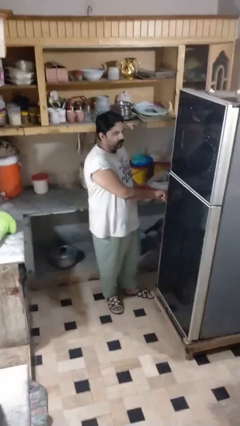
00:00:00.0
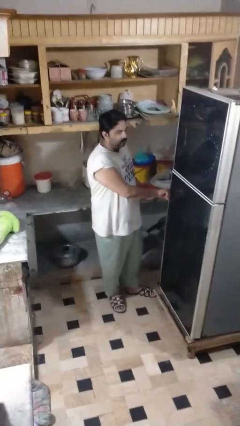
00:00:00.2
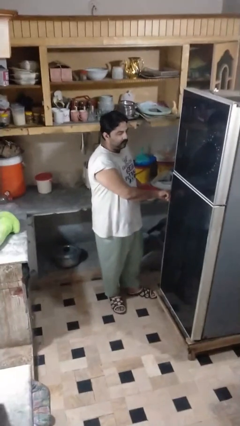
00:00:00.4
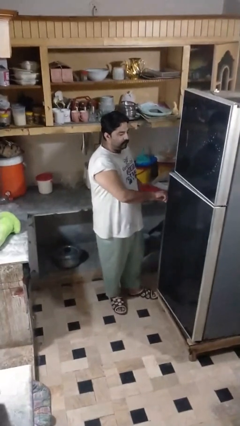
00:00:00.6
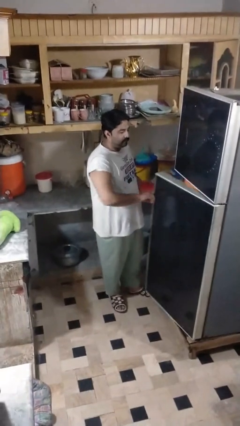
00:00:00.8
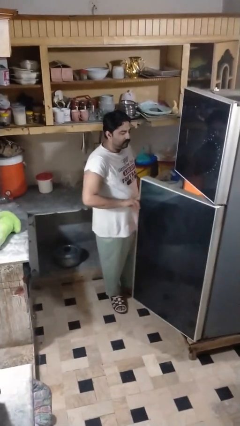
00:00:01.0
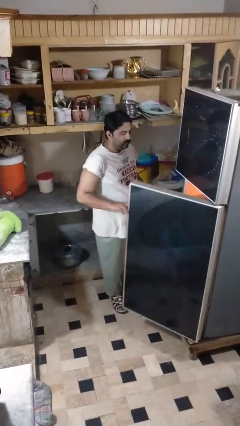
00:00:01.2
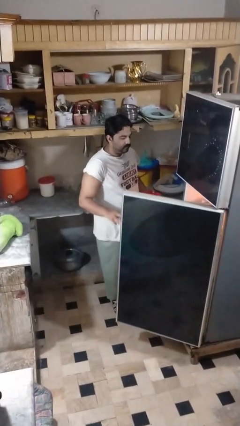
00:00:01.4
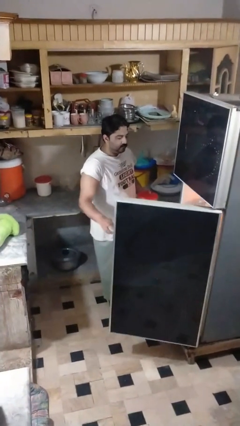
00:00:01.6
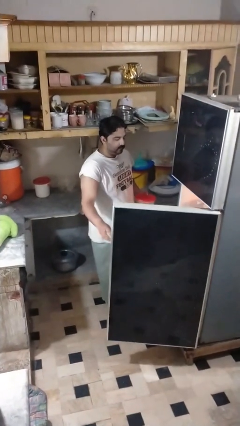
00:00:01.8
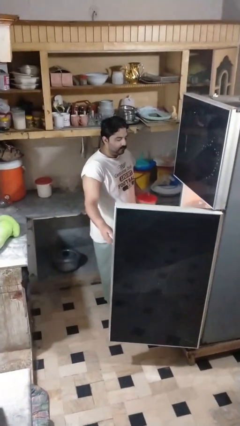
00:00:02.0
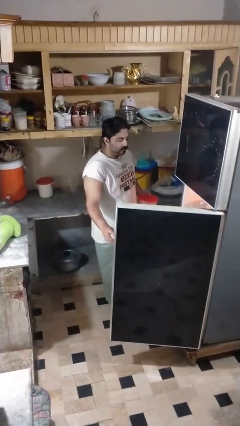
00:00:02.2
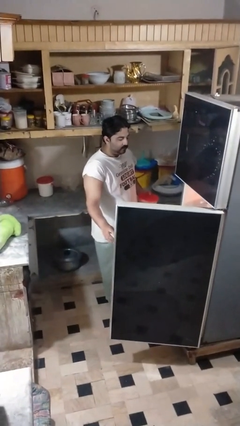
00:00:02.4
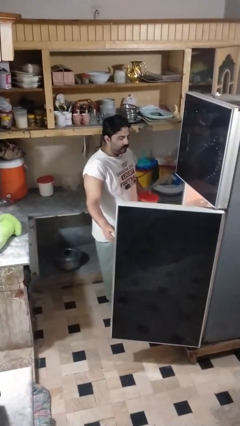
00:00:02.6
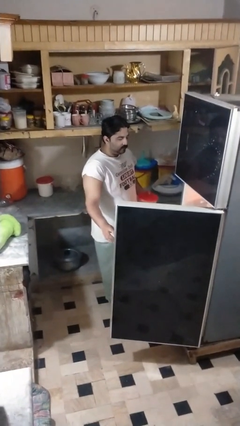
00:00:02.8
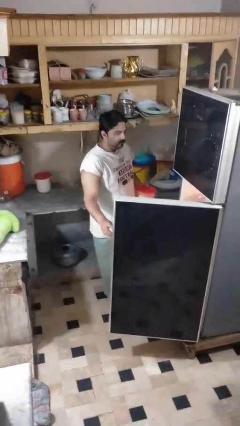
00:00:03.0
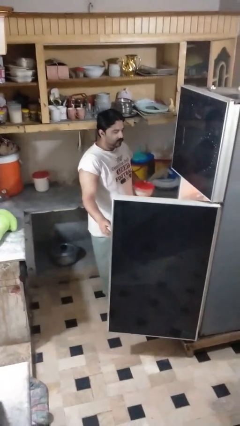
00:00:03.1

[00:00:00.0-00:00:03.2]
person opens refrigerator

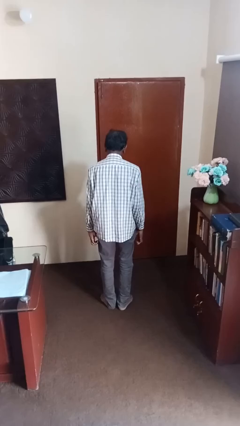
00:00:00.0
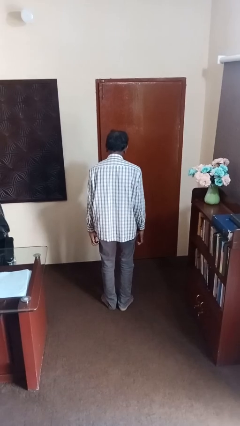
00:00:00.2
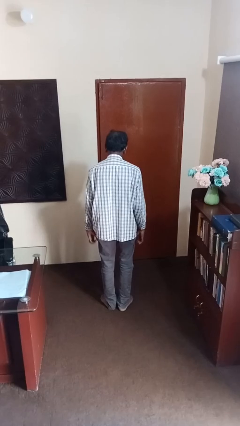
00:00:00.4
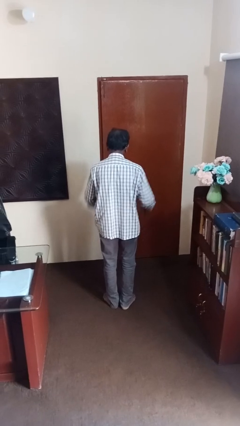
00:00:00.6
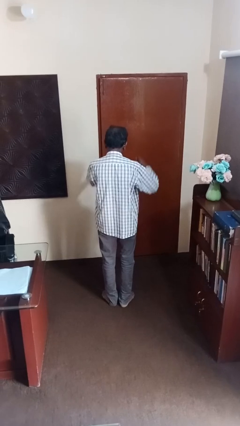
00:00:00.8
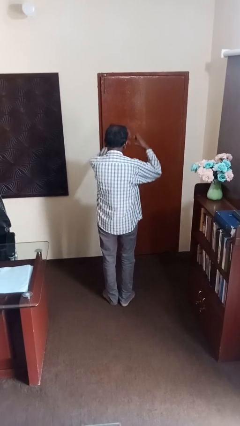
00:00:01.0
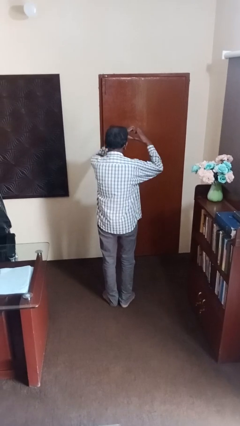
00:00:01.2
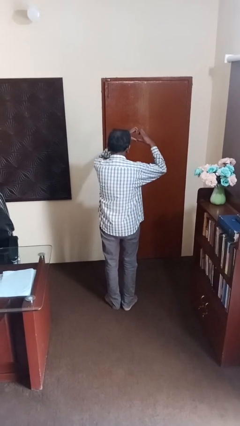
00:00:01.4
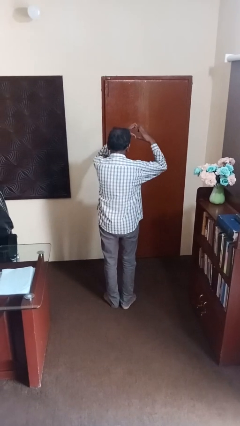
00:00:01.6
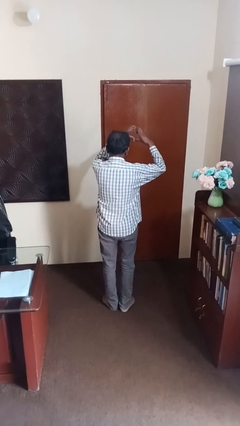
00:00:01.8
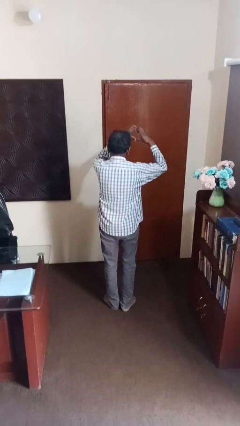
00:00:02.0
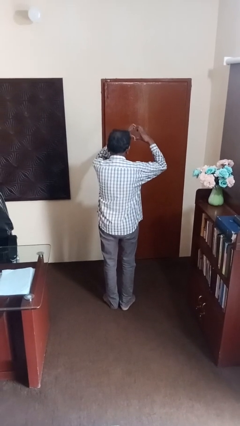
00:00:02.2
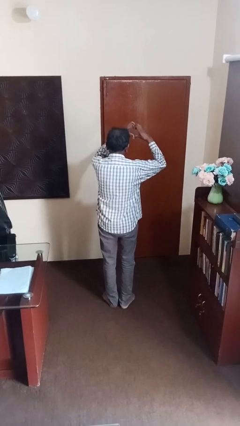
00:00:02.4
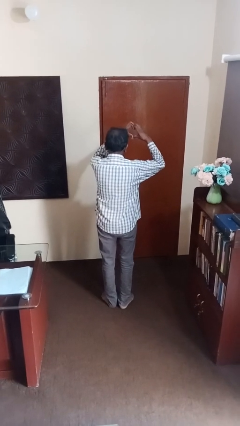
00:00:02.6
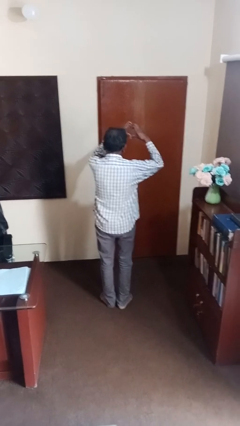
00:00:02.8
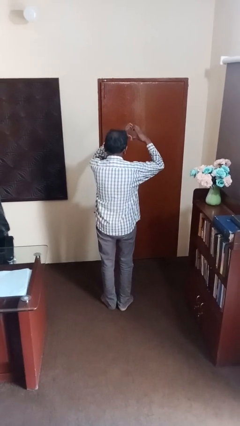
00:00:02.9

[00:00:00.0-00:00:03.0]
person gestures heart

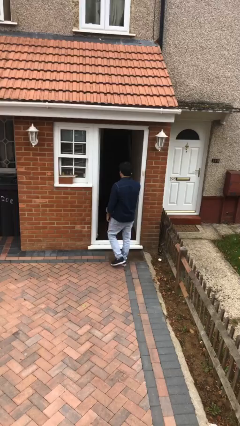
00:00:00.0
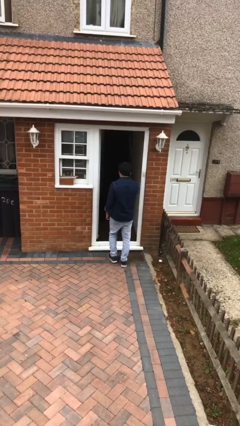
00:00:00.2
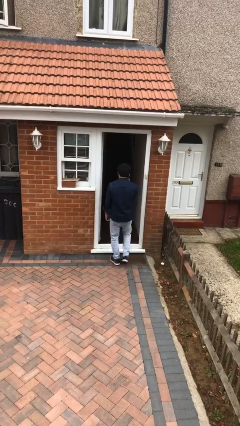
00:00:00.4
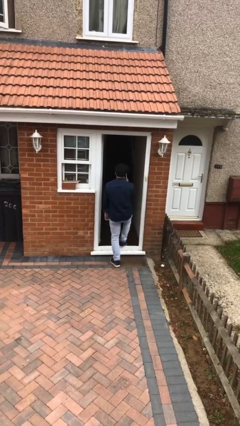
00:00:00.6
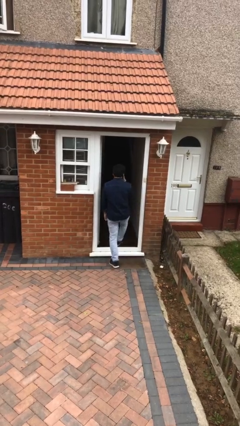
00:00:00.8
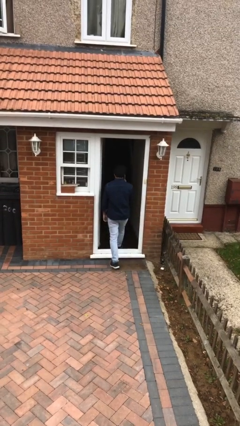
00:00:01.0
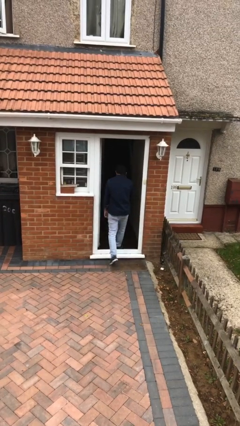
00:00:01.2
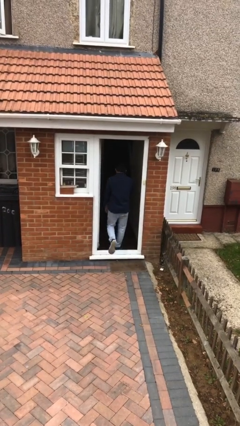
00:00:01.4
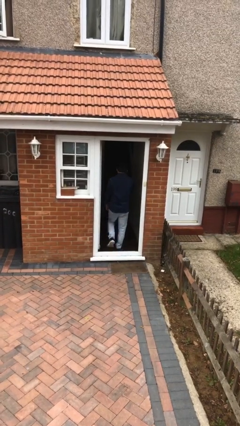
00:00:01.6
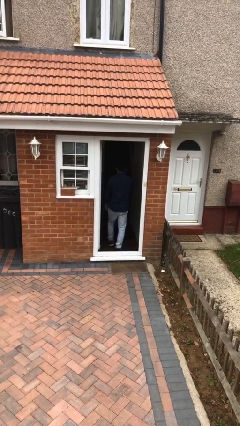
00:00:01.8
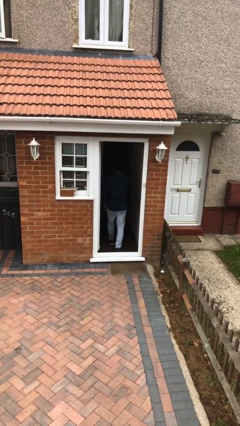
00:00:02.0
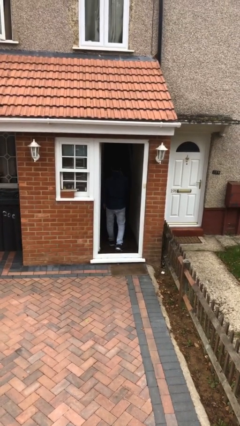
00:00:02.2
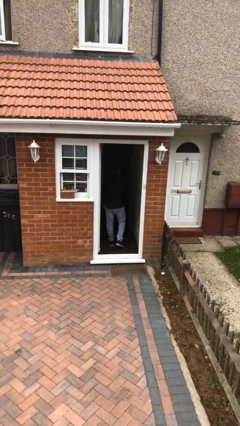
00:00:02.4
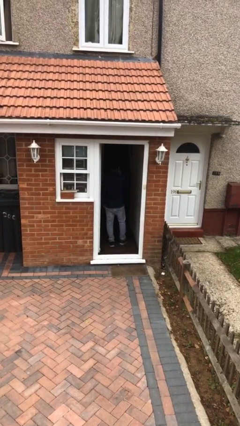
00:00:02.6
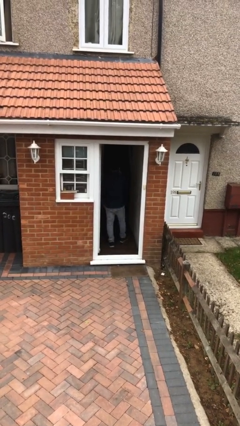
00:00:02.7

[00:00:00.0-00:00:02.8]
person exits scene through structure

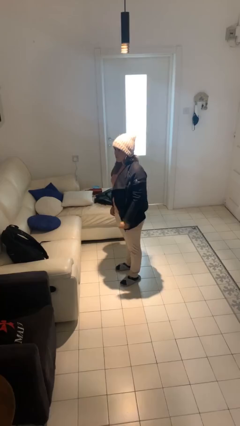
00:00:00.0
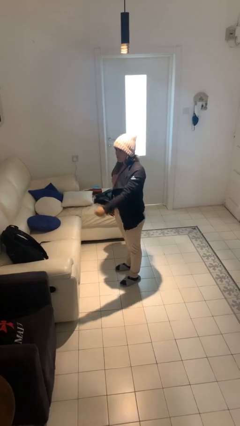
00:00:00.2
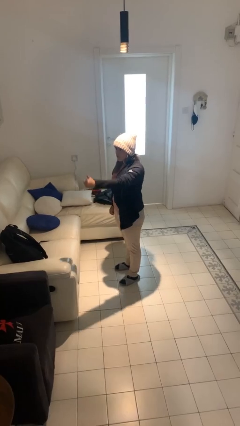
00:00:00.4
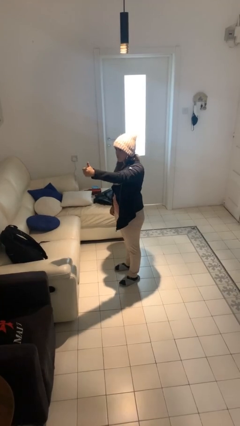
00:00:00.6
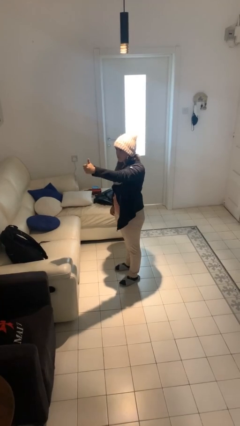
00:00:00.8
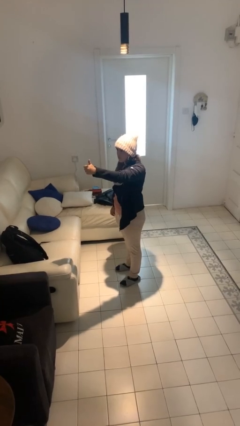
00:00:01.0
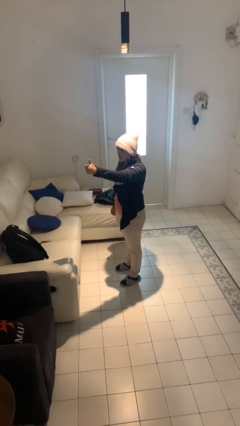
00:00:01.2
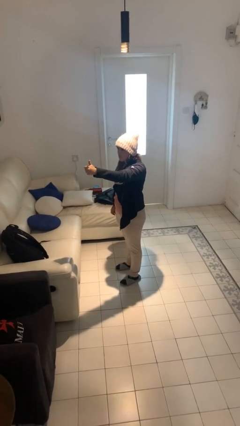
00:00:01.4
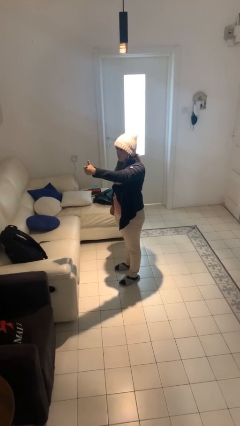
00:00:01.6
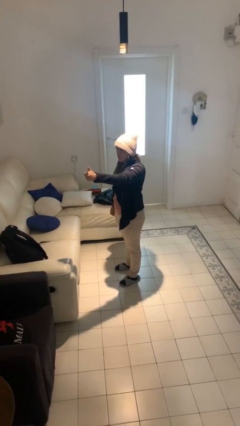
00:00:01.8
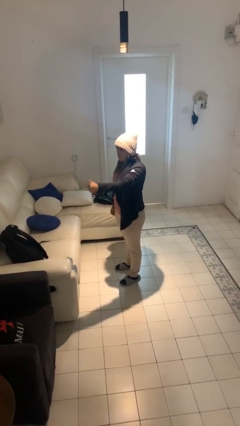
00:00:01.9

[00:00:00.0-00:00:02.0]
person gestures thumbs up

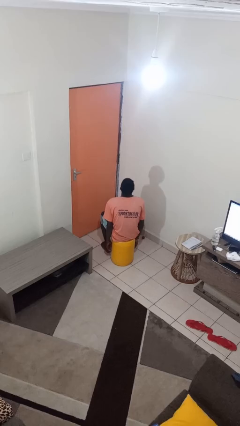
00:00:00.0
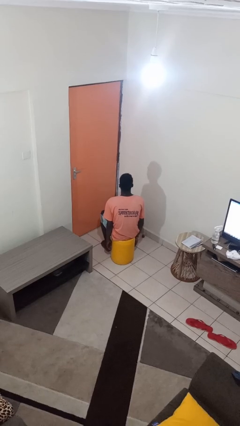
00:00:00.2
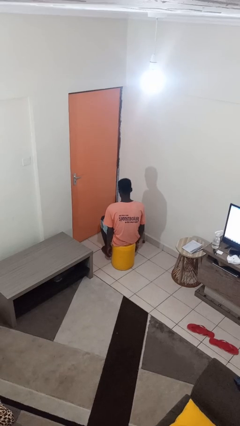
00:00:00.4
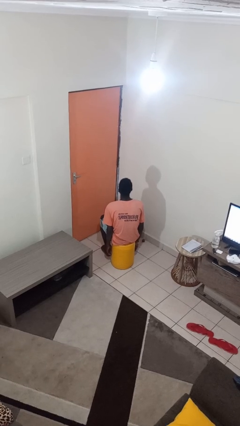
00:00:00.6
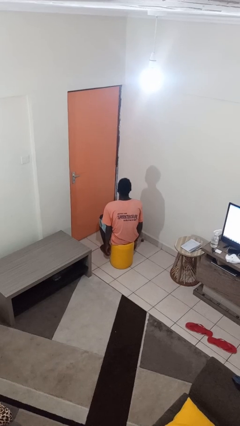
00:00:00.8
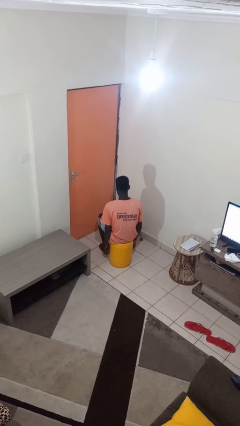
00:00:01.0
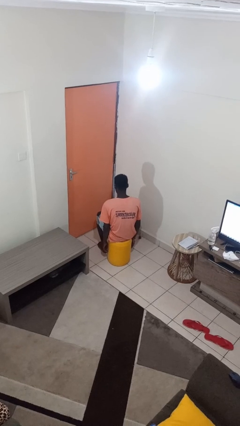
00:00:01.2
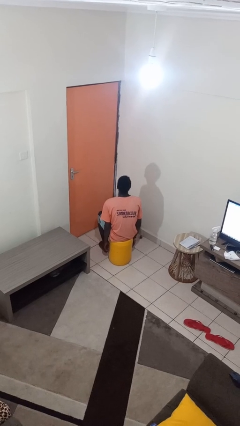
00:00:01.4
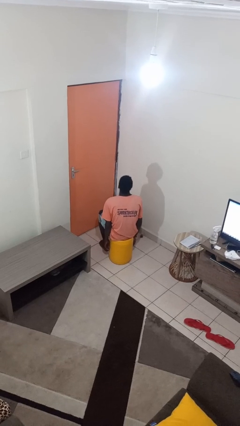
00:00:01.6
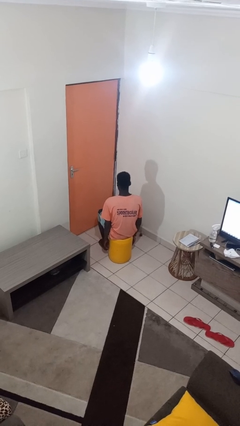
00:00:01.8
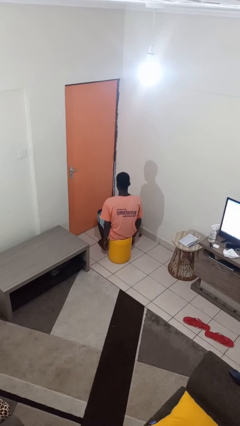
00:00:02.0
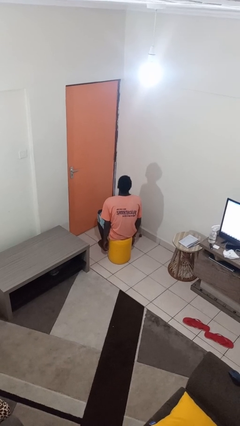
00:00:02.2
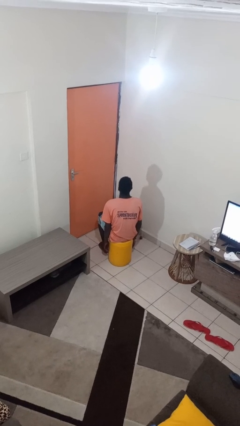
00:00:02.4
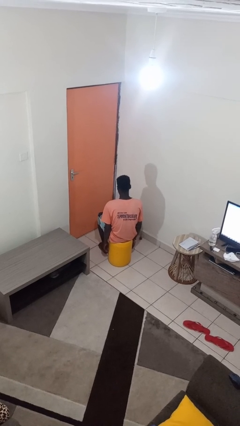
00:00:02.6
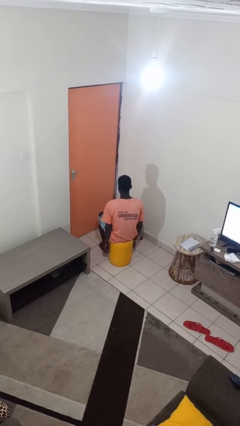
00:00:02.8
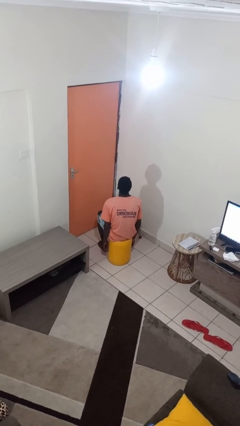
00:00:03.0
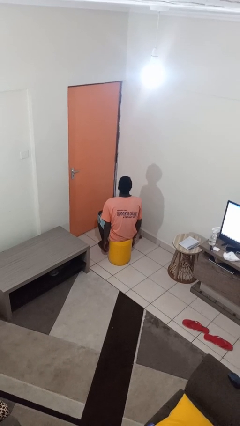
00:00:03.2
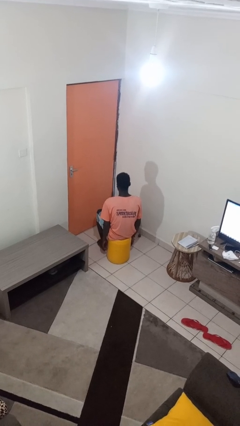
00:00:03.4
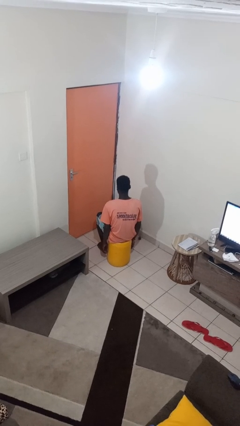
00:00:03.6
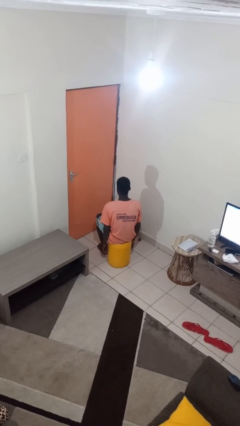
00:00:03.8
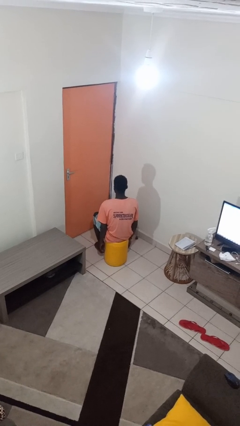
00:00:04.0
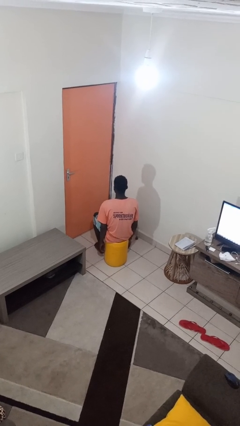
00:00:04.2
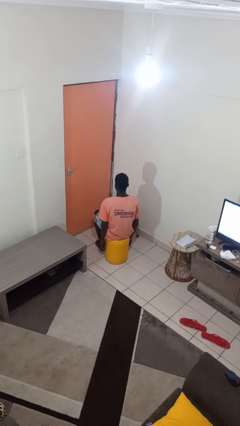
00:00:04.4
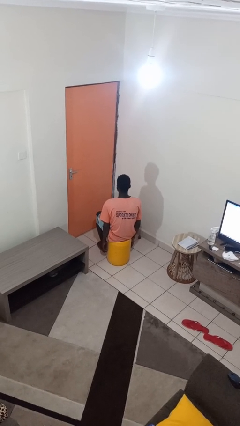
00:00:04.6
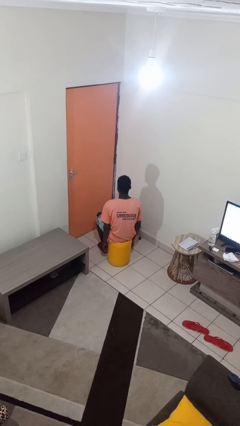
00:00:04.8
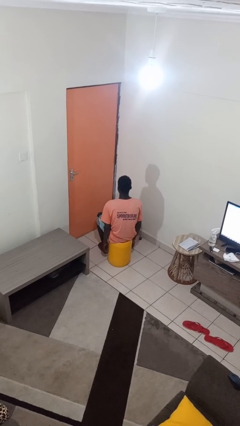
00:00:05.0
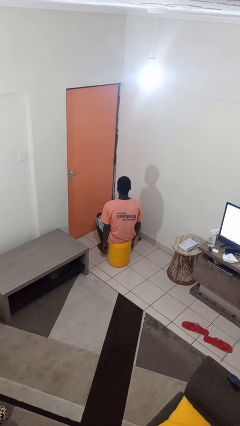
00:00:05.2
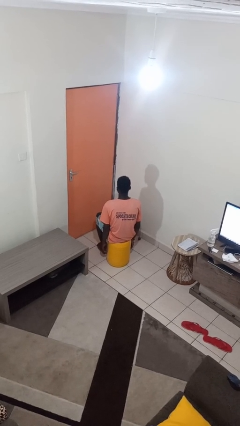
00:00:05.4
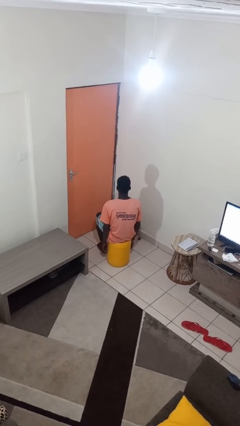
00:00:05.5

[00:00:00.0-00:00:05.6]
person nods head

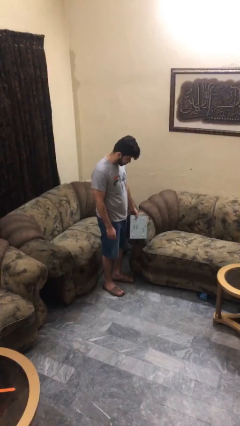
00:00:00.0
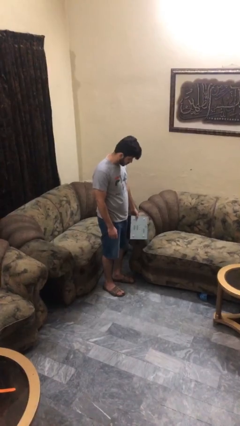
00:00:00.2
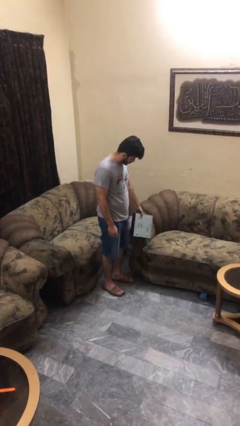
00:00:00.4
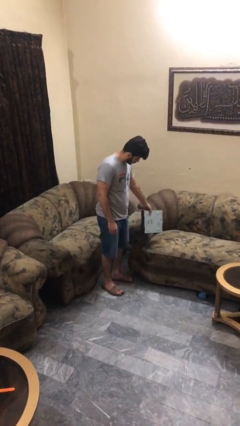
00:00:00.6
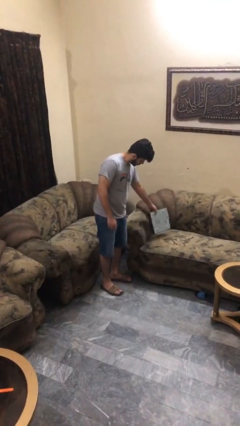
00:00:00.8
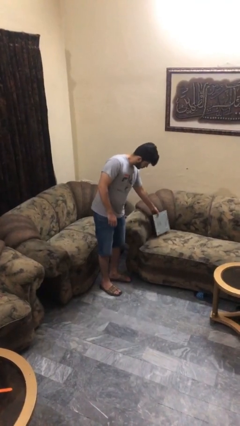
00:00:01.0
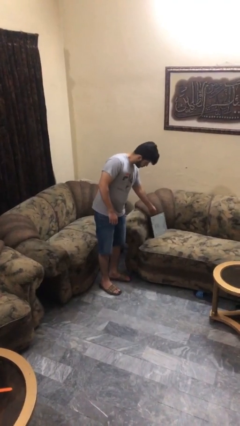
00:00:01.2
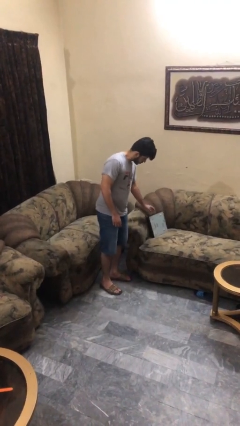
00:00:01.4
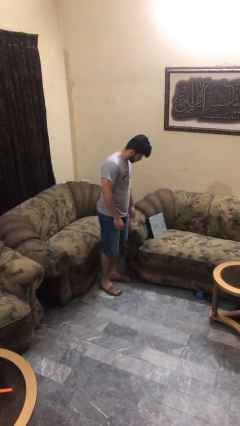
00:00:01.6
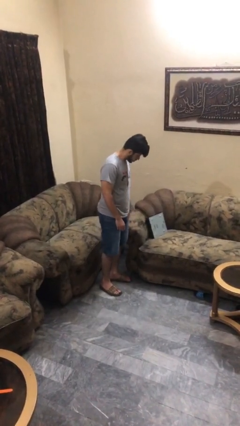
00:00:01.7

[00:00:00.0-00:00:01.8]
person puts down object on couch
